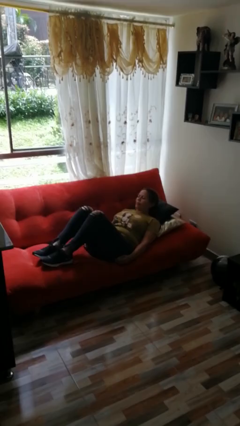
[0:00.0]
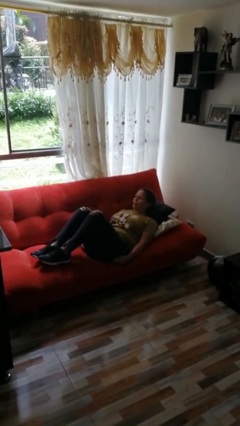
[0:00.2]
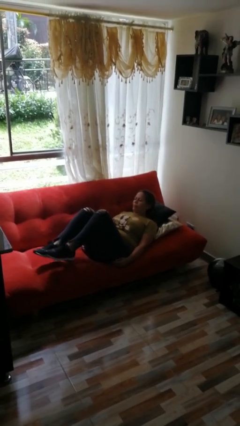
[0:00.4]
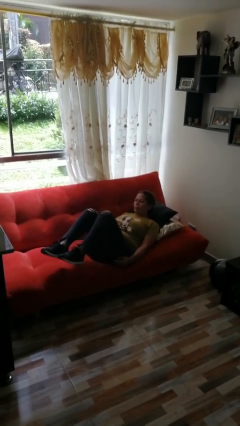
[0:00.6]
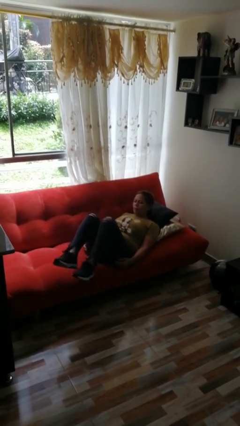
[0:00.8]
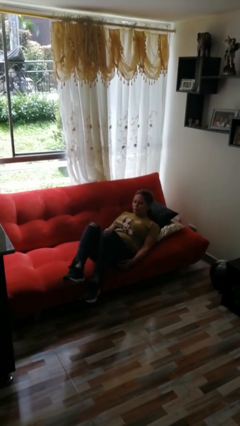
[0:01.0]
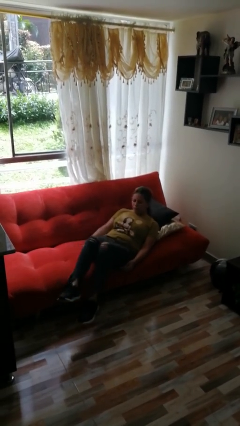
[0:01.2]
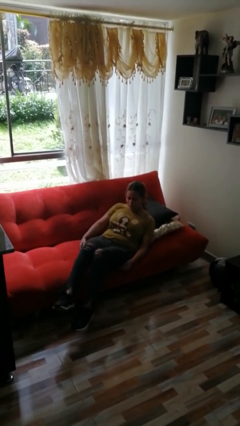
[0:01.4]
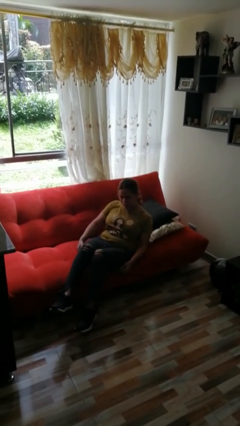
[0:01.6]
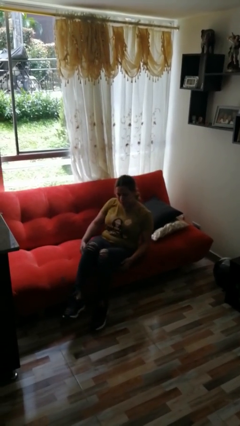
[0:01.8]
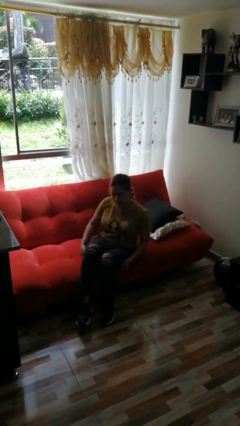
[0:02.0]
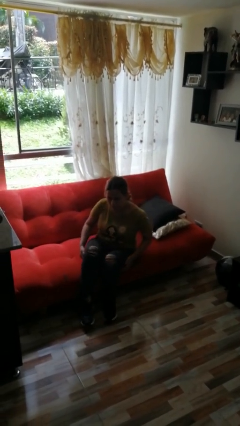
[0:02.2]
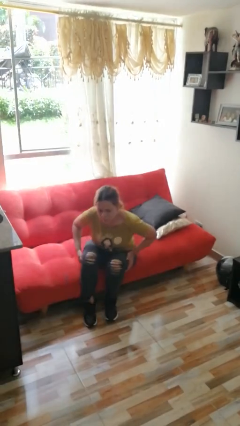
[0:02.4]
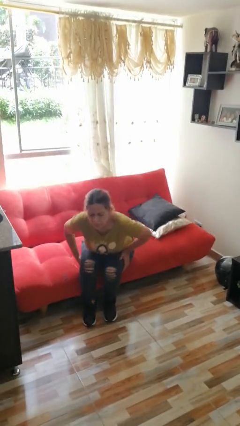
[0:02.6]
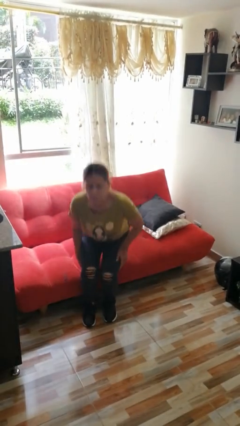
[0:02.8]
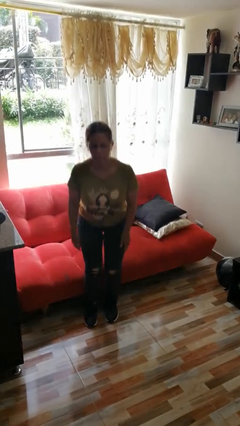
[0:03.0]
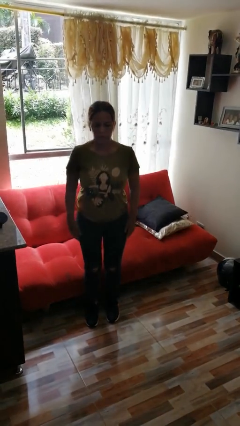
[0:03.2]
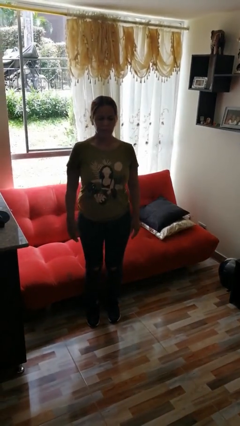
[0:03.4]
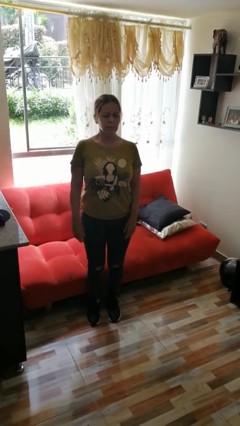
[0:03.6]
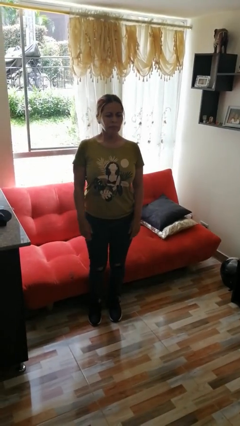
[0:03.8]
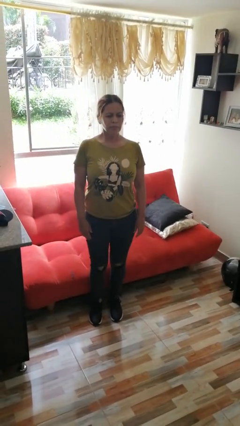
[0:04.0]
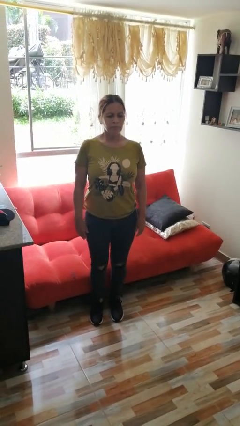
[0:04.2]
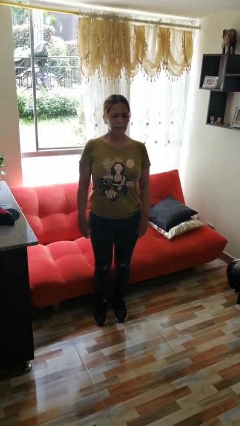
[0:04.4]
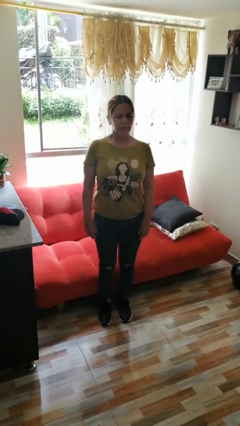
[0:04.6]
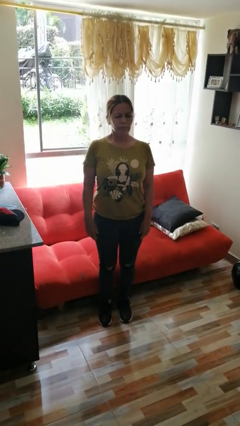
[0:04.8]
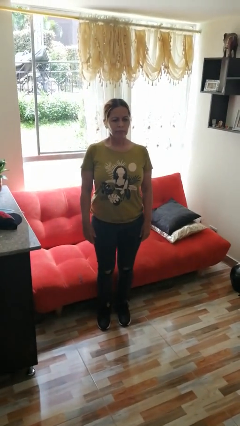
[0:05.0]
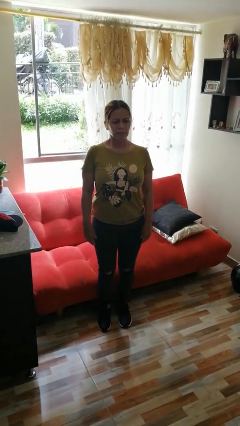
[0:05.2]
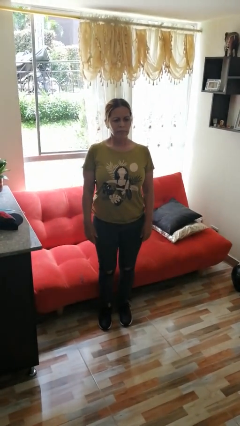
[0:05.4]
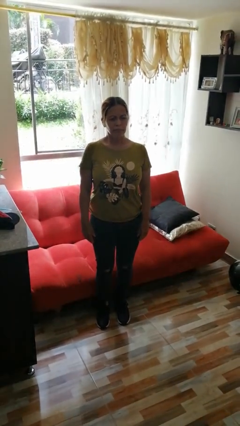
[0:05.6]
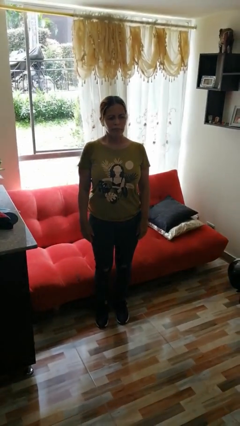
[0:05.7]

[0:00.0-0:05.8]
person stands up

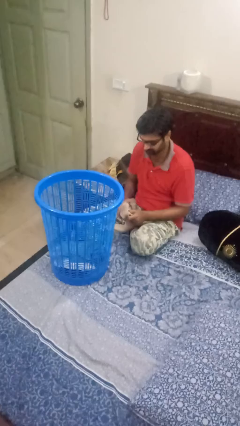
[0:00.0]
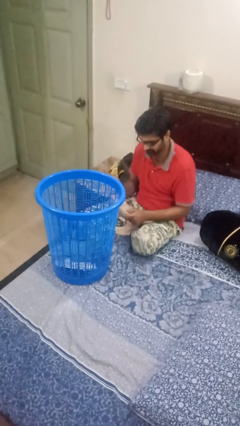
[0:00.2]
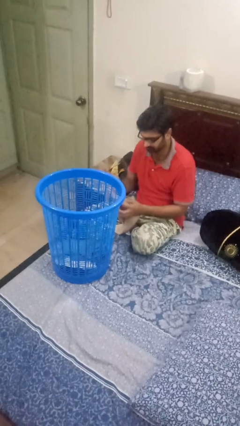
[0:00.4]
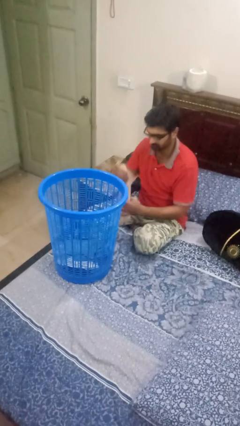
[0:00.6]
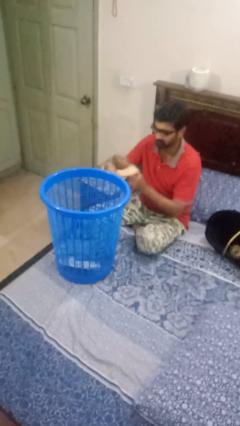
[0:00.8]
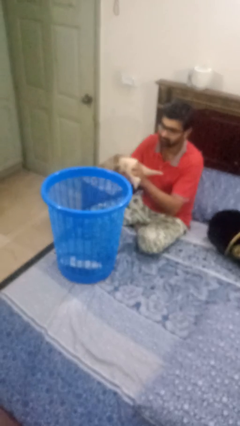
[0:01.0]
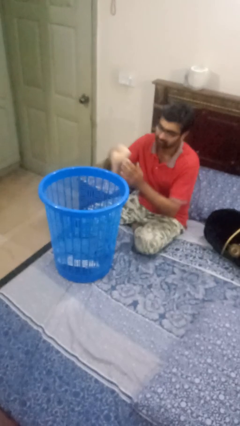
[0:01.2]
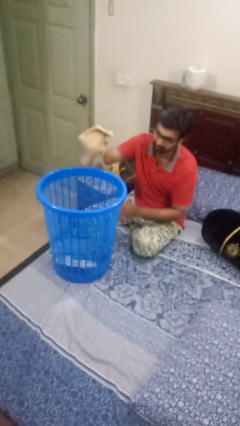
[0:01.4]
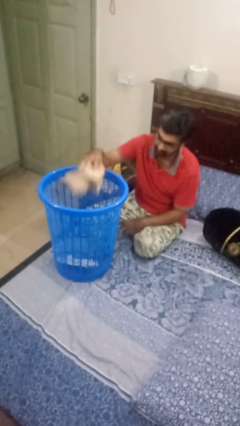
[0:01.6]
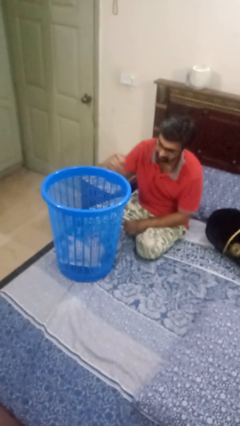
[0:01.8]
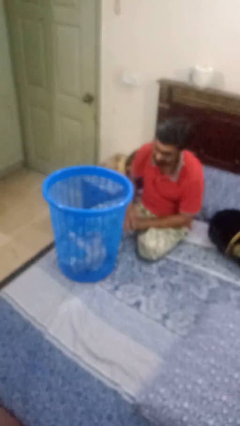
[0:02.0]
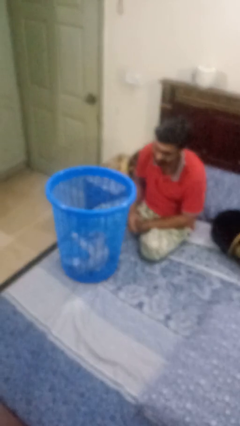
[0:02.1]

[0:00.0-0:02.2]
person puts object into basket

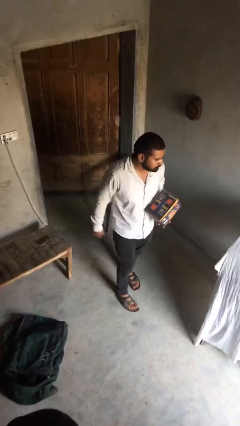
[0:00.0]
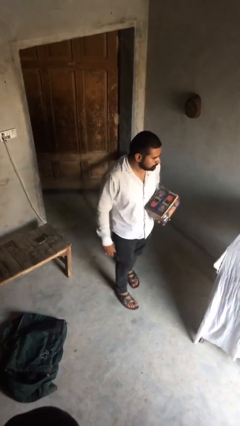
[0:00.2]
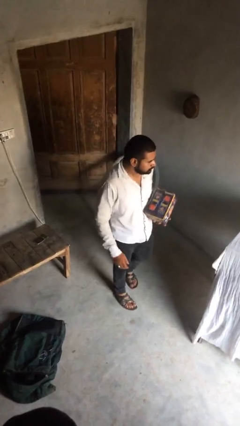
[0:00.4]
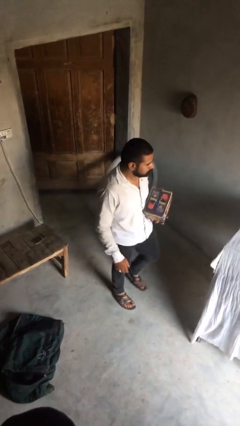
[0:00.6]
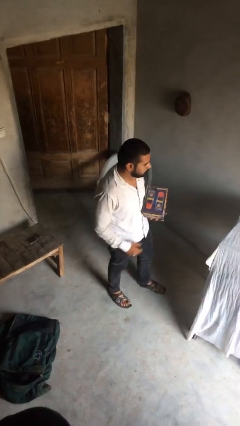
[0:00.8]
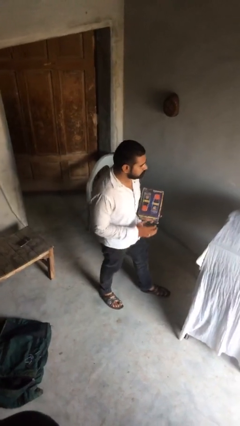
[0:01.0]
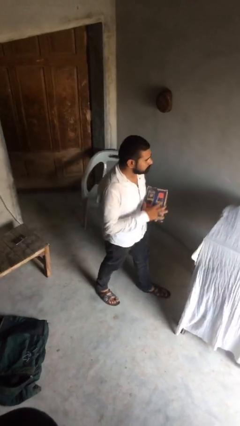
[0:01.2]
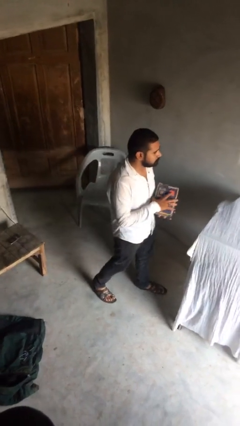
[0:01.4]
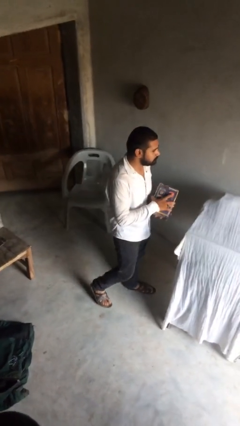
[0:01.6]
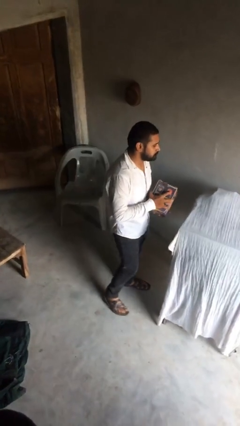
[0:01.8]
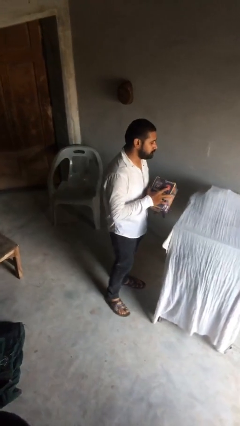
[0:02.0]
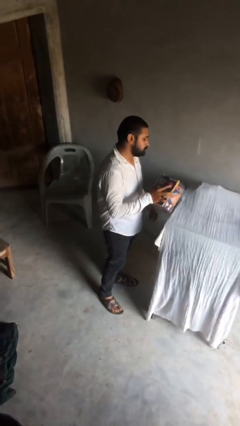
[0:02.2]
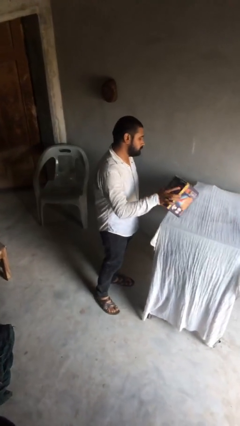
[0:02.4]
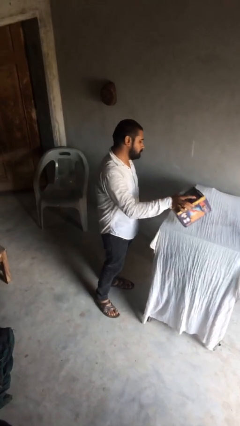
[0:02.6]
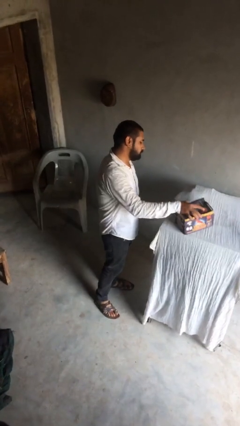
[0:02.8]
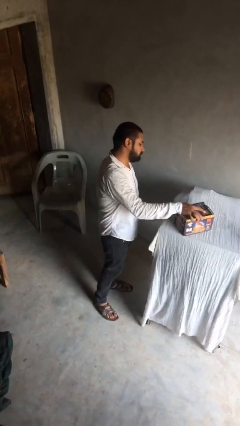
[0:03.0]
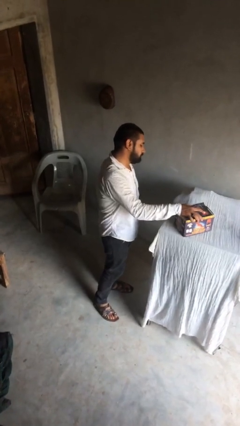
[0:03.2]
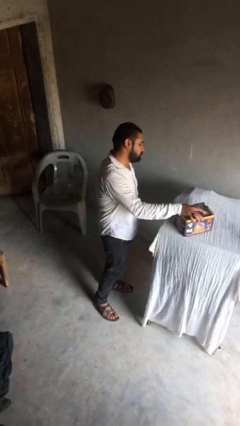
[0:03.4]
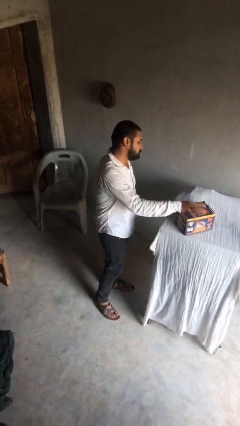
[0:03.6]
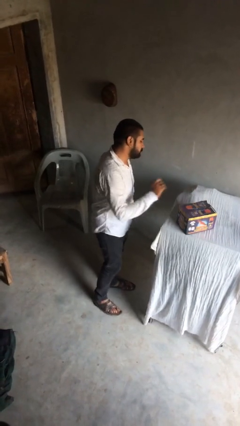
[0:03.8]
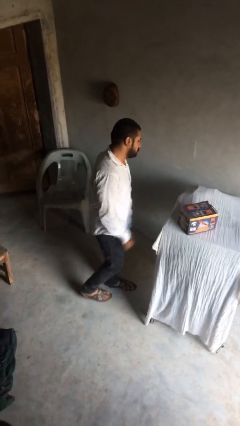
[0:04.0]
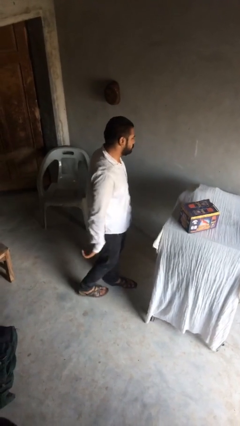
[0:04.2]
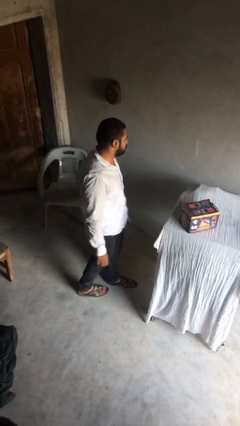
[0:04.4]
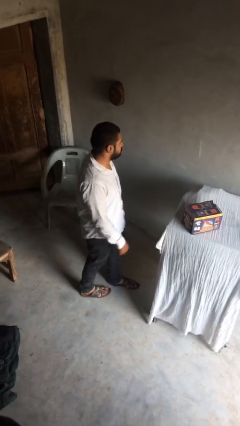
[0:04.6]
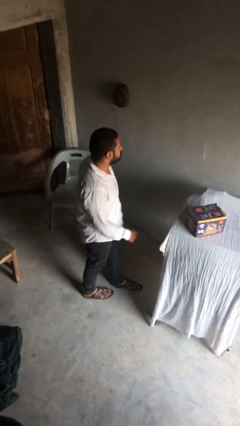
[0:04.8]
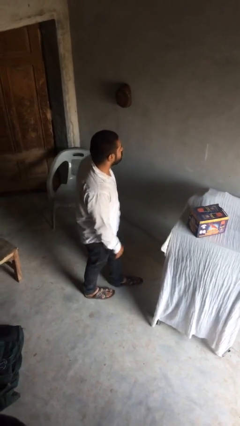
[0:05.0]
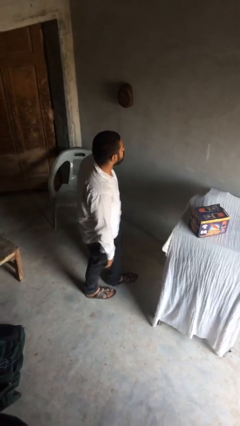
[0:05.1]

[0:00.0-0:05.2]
person puts down object on shelf

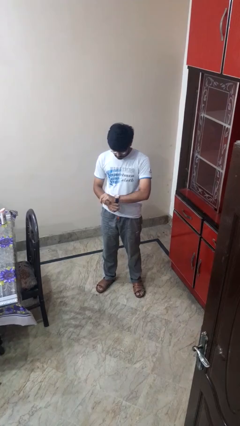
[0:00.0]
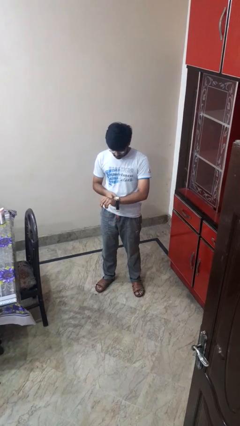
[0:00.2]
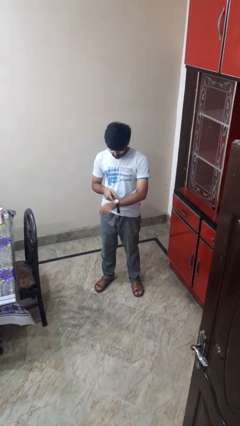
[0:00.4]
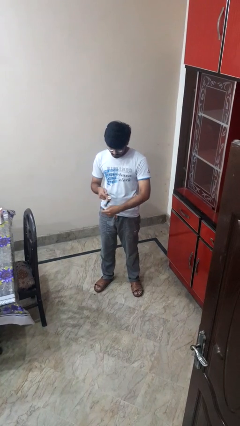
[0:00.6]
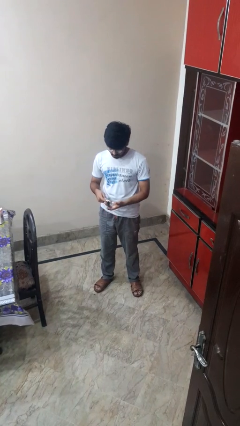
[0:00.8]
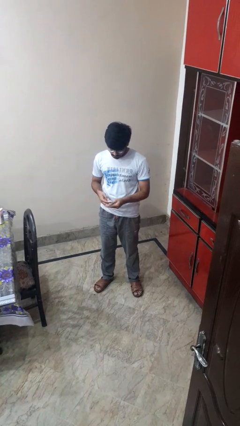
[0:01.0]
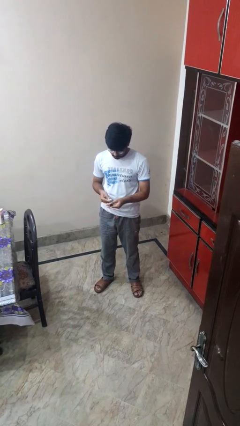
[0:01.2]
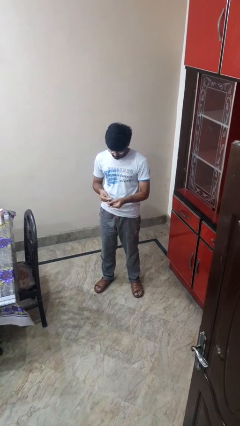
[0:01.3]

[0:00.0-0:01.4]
person takes off wristwatch

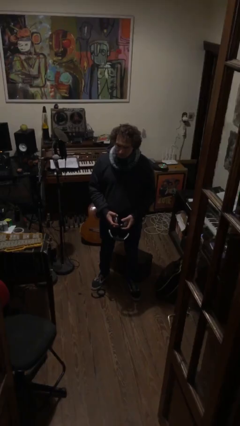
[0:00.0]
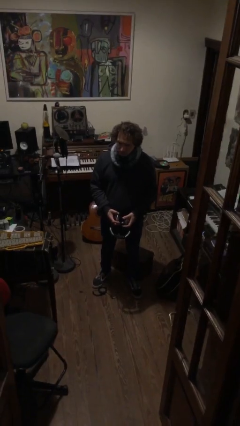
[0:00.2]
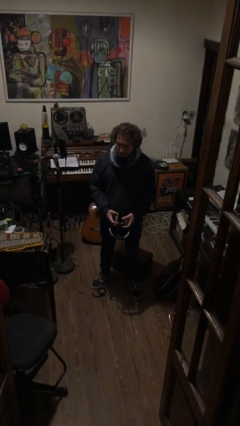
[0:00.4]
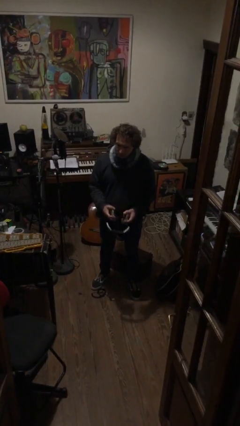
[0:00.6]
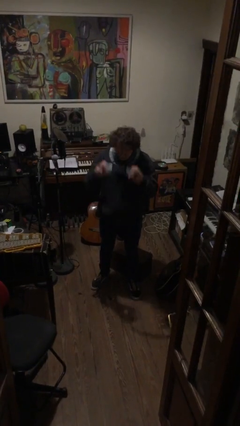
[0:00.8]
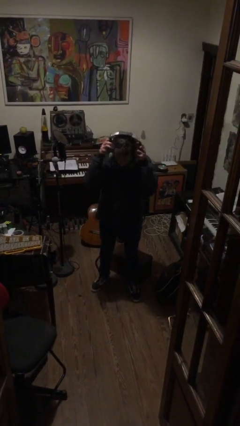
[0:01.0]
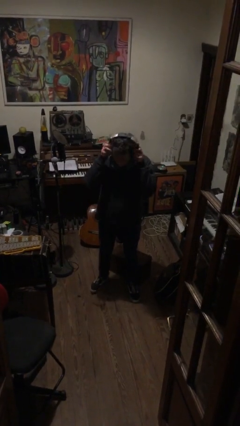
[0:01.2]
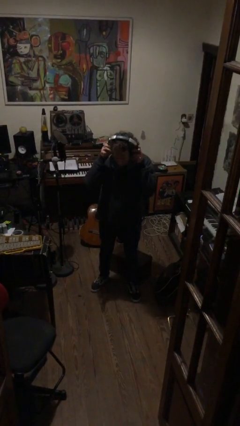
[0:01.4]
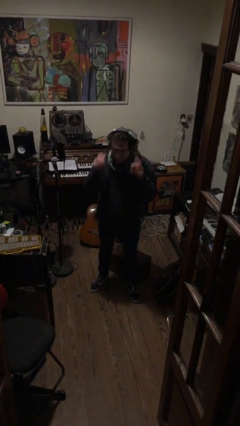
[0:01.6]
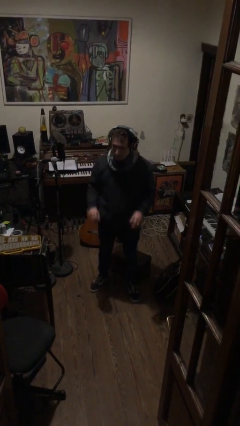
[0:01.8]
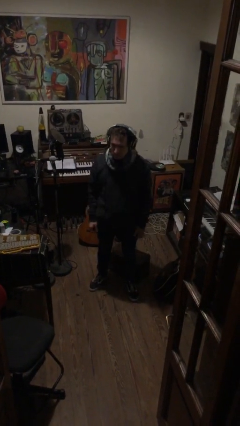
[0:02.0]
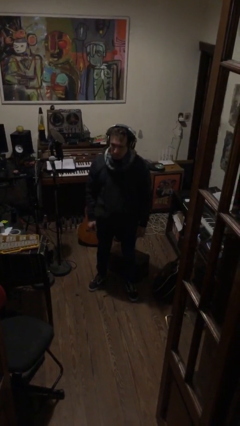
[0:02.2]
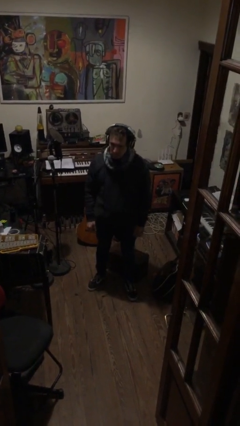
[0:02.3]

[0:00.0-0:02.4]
person puts on headphones

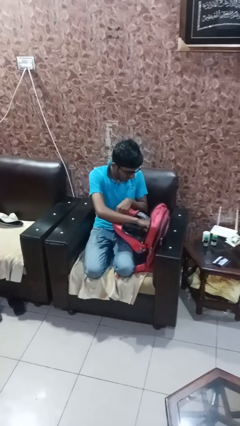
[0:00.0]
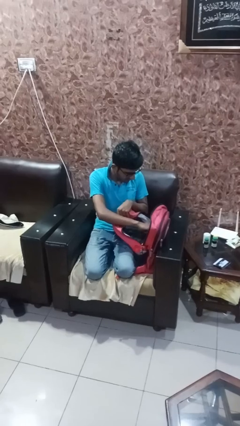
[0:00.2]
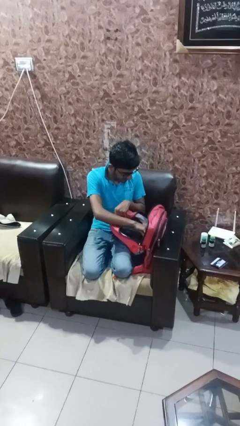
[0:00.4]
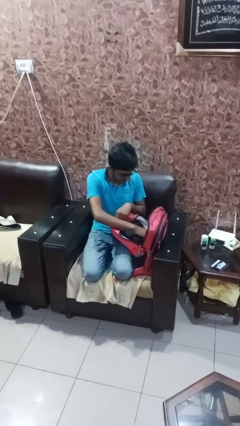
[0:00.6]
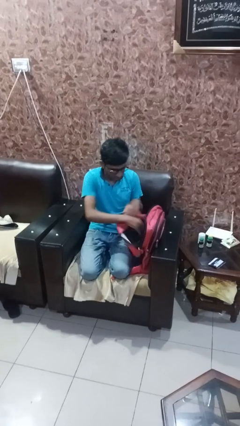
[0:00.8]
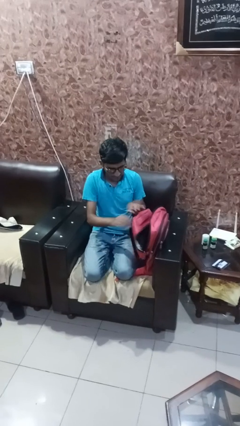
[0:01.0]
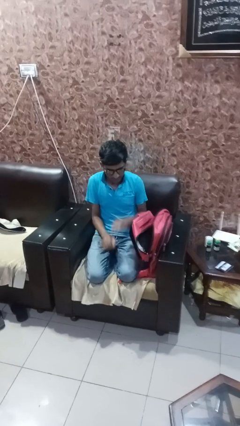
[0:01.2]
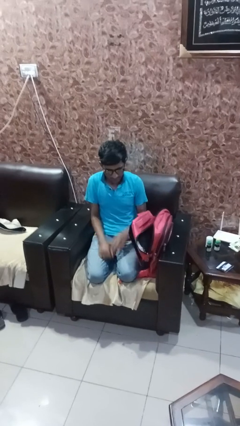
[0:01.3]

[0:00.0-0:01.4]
person searches in bag
